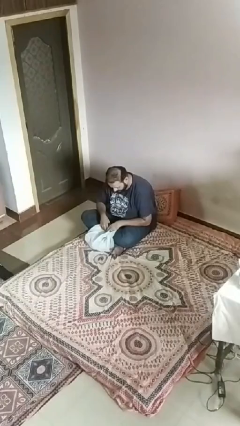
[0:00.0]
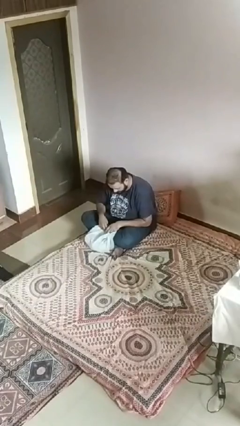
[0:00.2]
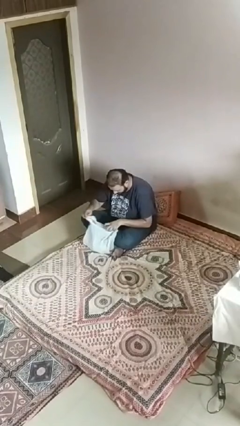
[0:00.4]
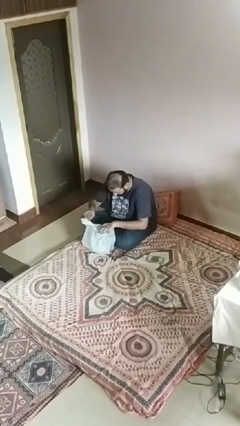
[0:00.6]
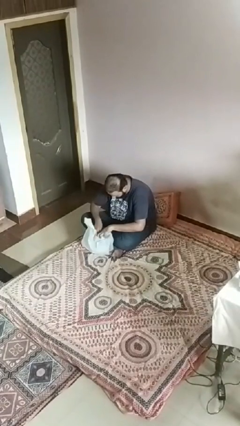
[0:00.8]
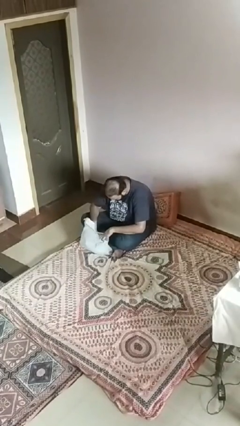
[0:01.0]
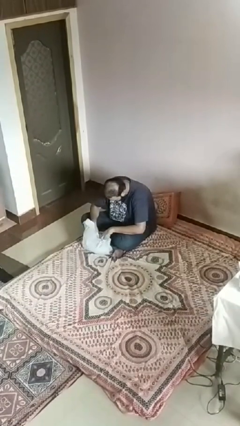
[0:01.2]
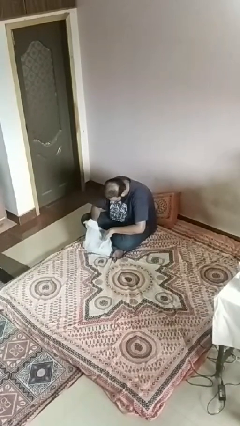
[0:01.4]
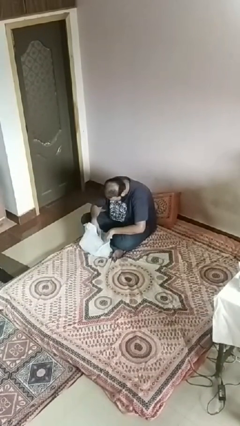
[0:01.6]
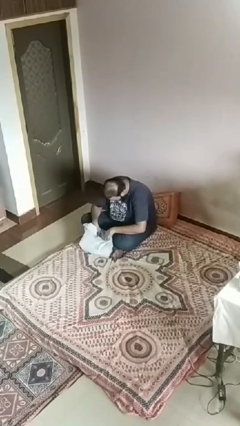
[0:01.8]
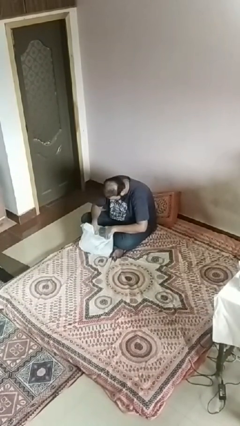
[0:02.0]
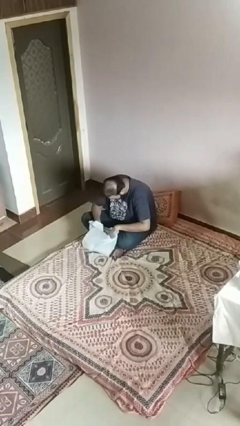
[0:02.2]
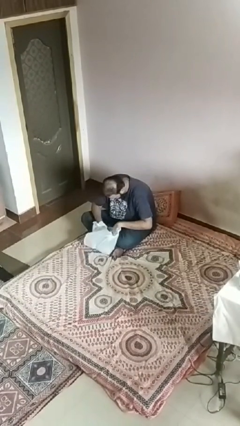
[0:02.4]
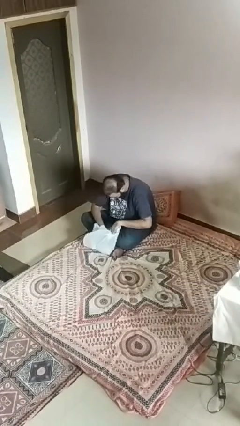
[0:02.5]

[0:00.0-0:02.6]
person searches in bag

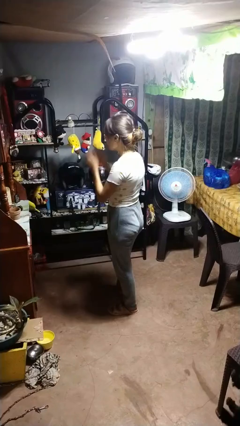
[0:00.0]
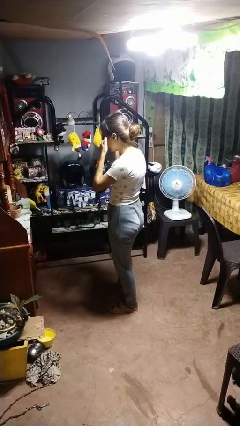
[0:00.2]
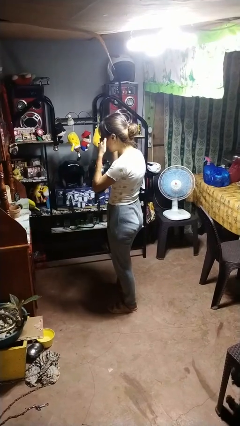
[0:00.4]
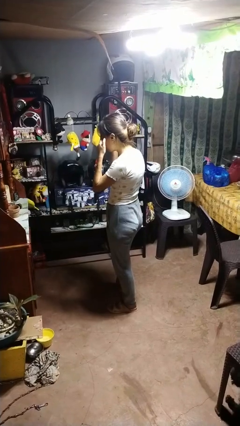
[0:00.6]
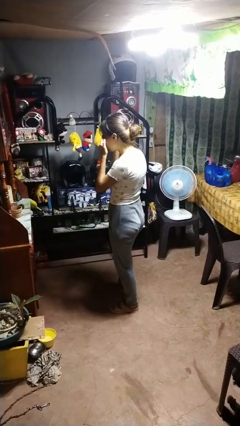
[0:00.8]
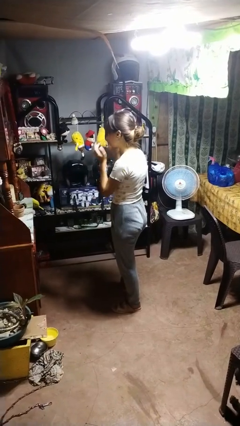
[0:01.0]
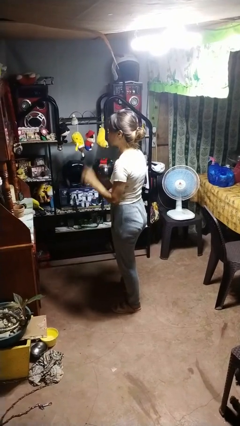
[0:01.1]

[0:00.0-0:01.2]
person rubs eyes

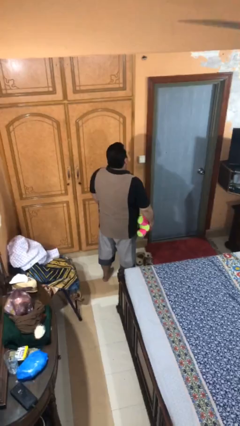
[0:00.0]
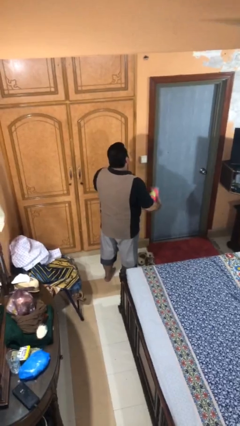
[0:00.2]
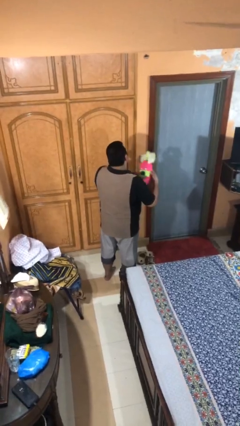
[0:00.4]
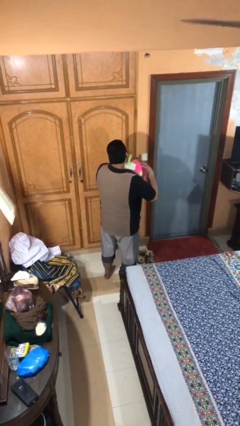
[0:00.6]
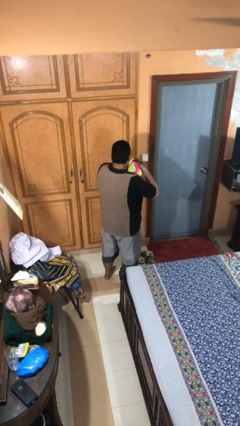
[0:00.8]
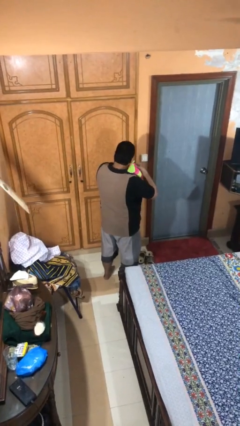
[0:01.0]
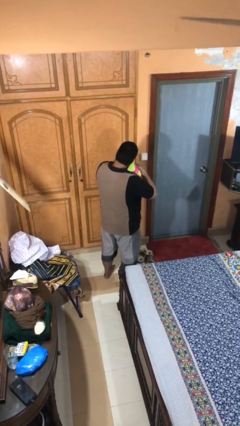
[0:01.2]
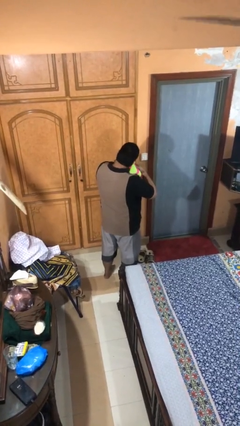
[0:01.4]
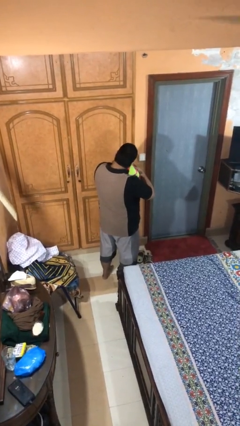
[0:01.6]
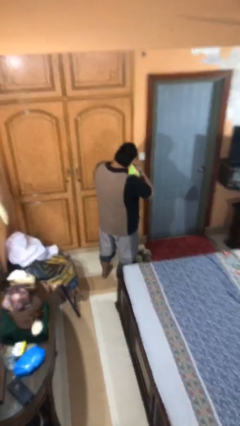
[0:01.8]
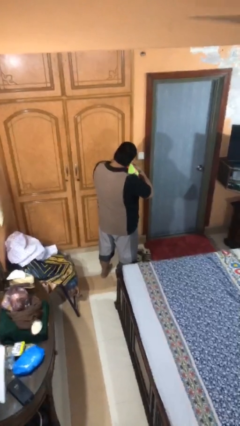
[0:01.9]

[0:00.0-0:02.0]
person hugs stuffed animal

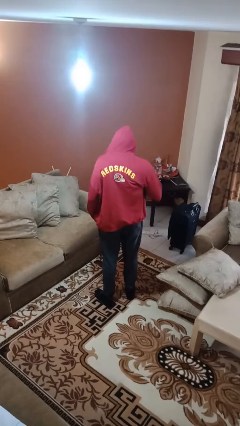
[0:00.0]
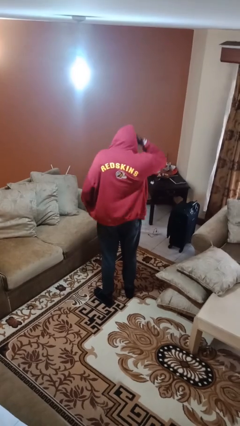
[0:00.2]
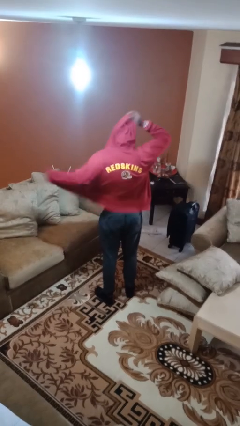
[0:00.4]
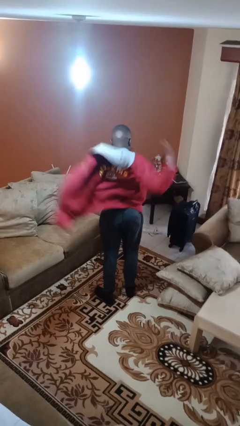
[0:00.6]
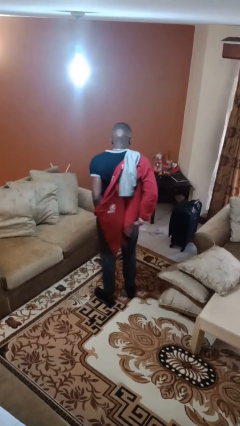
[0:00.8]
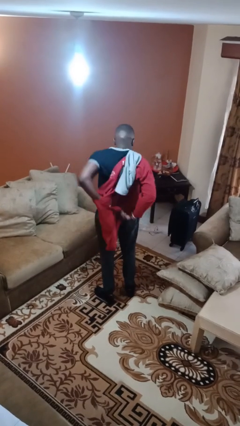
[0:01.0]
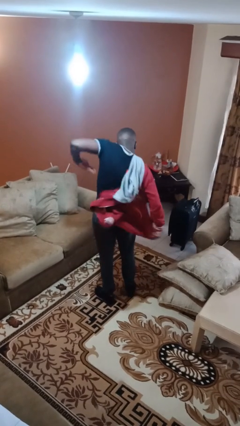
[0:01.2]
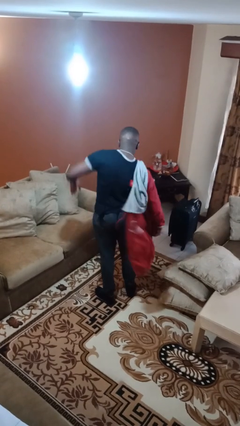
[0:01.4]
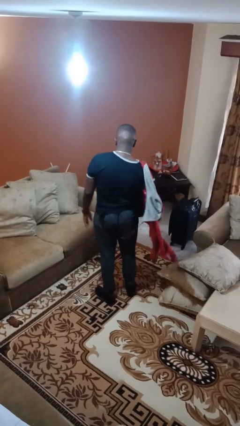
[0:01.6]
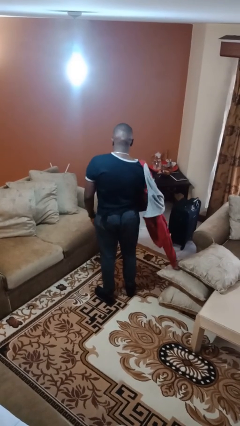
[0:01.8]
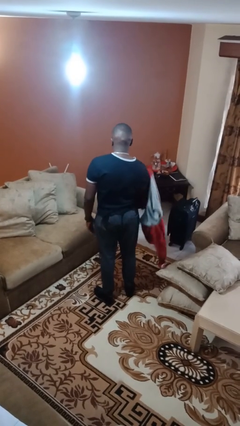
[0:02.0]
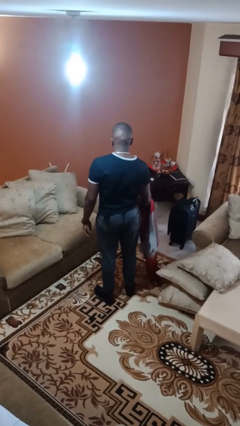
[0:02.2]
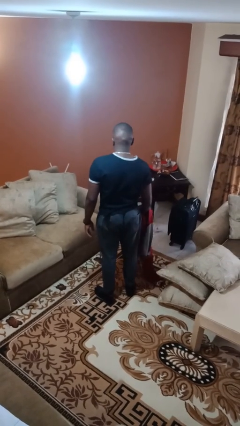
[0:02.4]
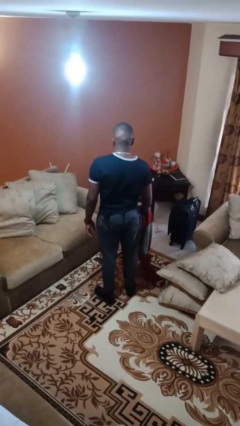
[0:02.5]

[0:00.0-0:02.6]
person takes off hoodie

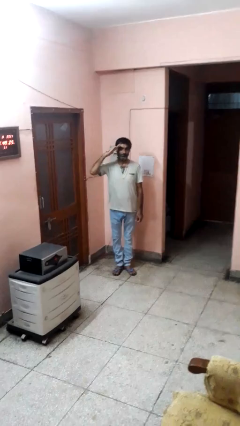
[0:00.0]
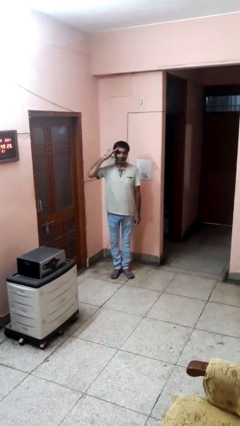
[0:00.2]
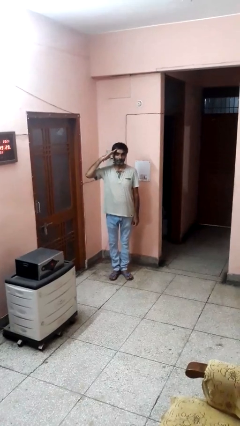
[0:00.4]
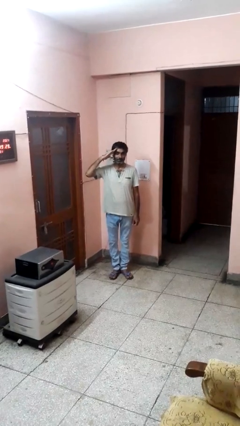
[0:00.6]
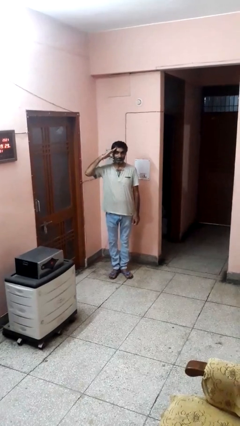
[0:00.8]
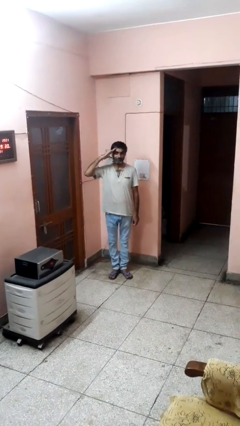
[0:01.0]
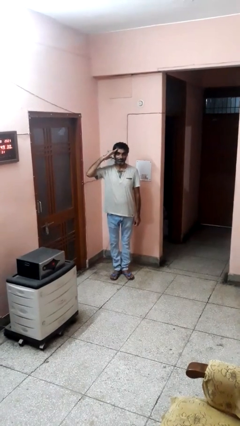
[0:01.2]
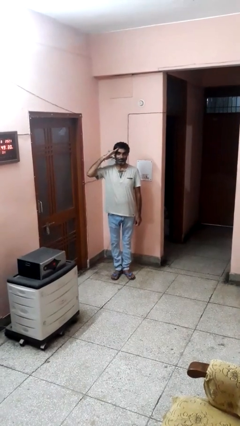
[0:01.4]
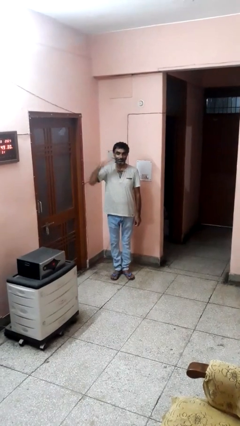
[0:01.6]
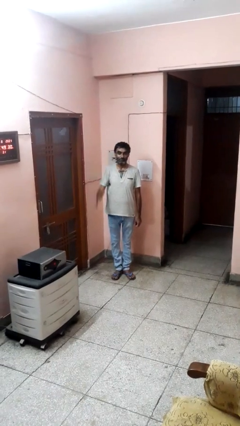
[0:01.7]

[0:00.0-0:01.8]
person salutes

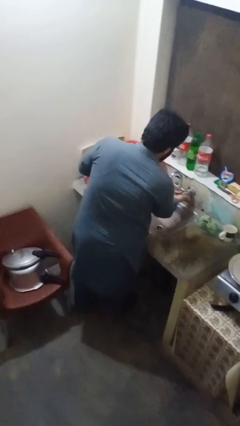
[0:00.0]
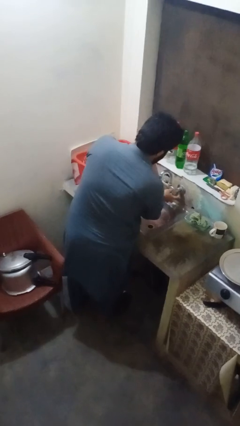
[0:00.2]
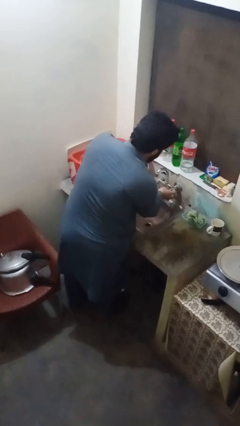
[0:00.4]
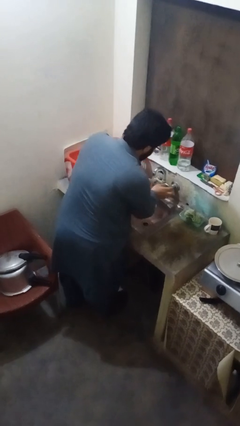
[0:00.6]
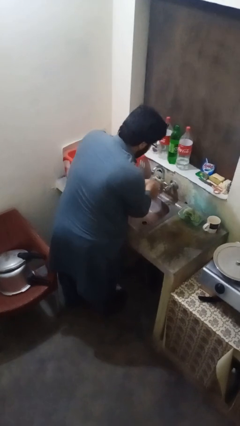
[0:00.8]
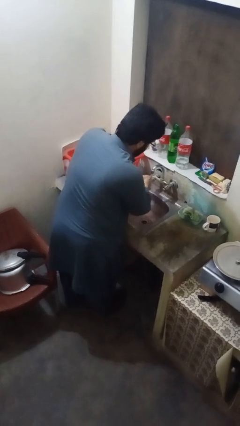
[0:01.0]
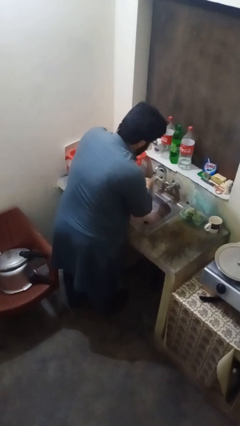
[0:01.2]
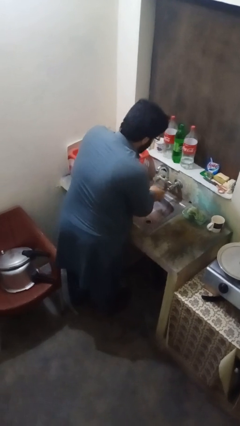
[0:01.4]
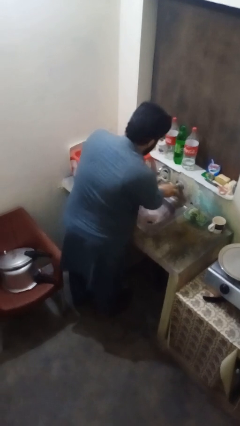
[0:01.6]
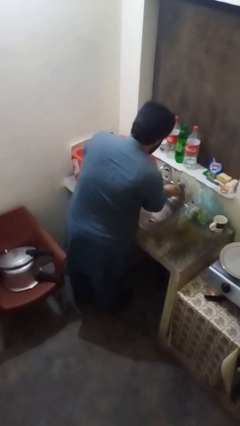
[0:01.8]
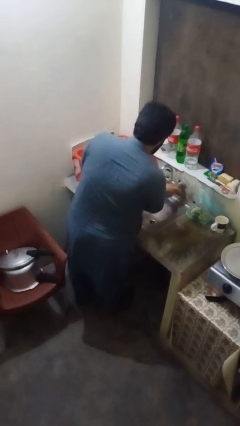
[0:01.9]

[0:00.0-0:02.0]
person washes hands

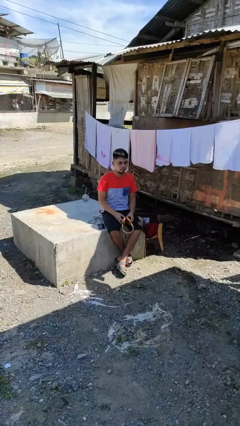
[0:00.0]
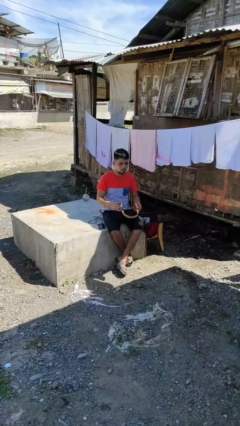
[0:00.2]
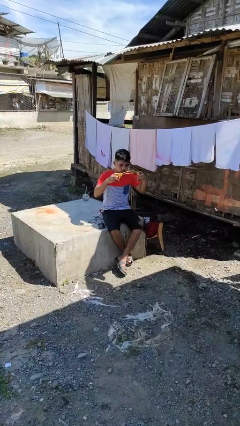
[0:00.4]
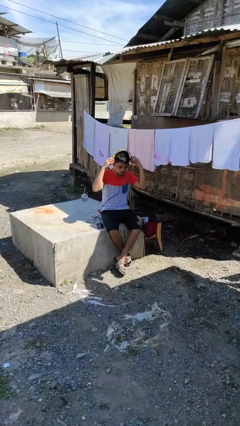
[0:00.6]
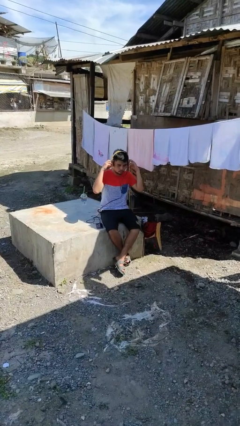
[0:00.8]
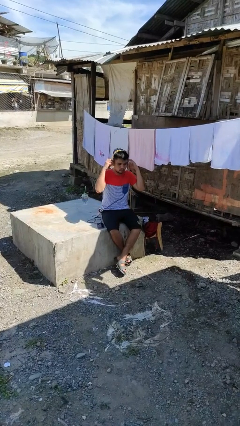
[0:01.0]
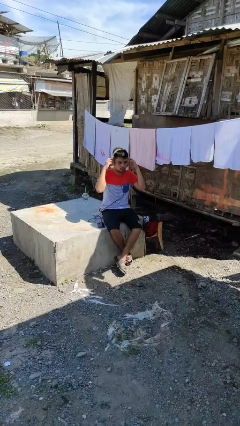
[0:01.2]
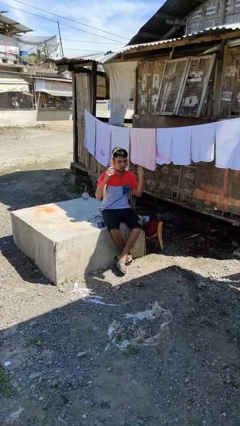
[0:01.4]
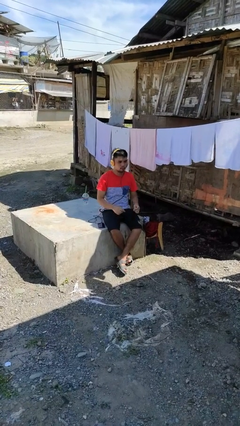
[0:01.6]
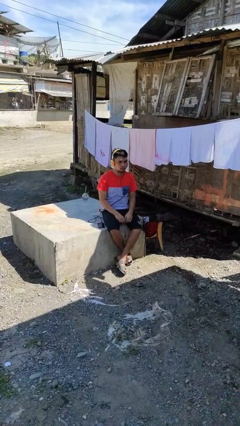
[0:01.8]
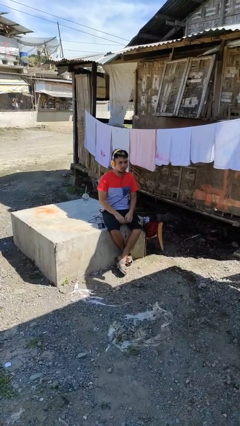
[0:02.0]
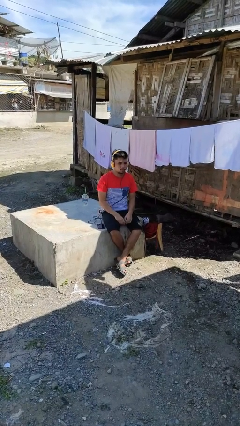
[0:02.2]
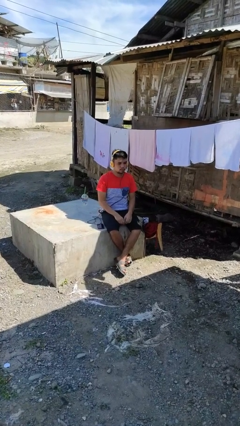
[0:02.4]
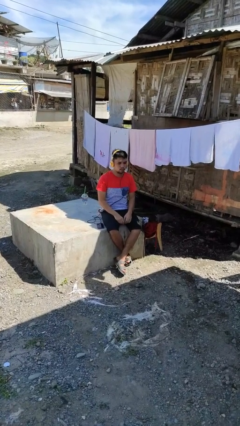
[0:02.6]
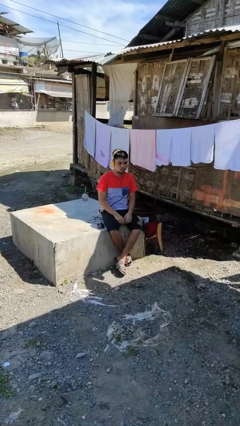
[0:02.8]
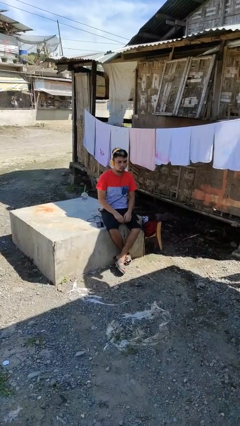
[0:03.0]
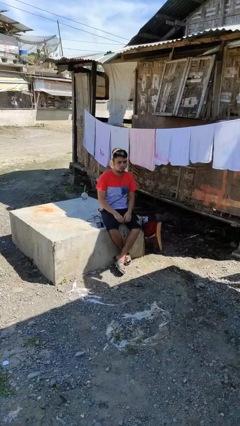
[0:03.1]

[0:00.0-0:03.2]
person puts on headphones

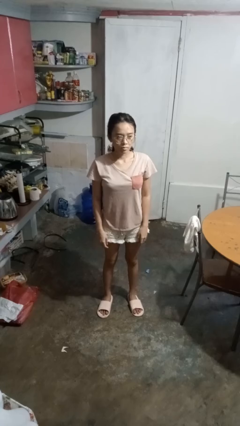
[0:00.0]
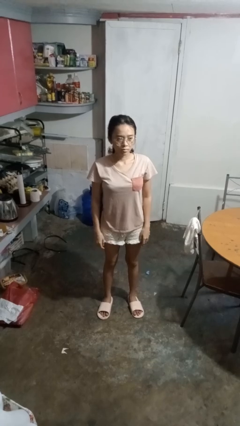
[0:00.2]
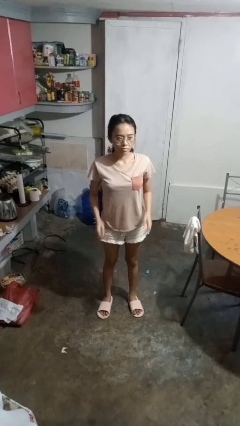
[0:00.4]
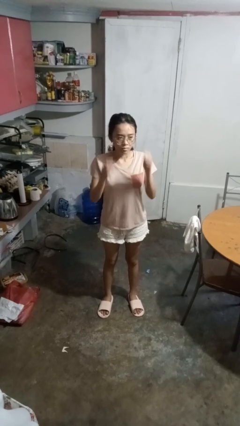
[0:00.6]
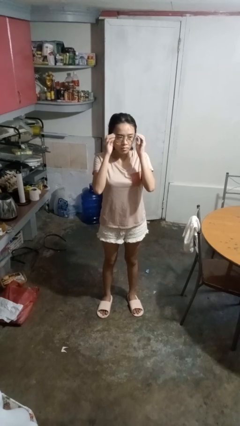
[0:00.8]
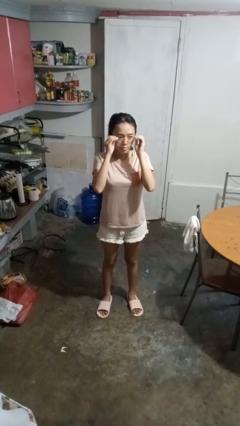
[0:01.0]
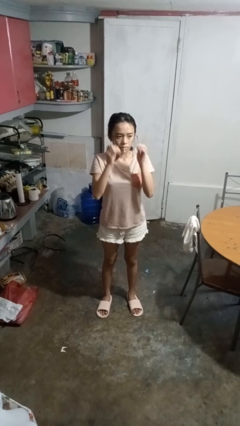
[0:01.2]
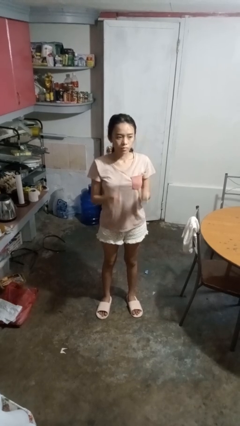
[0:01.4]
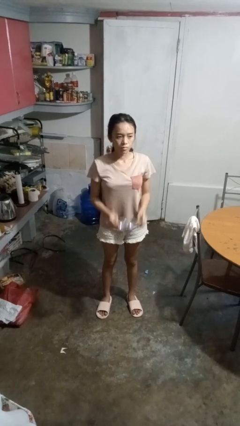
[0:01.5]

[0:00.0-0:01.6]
person takes off glasses
